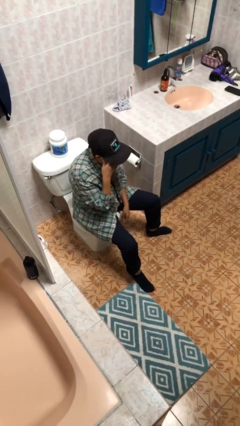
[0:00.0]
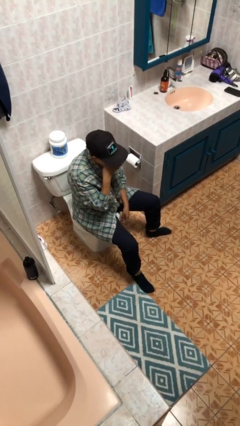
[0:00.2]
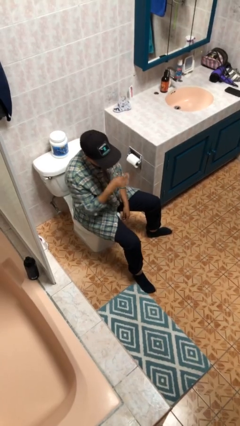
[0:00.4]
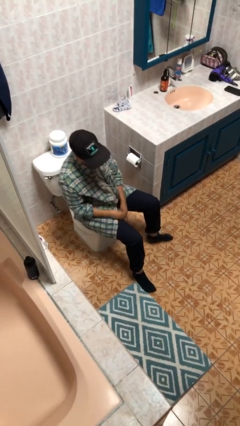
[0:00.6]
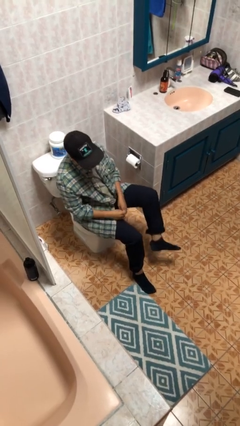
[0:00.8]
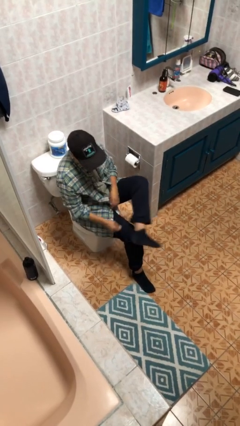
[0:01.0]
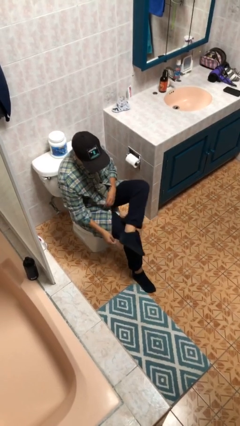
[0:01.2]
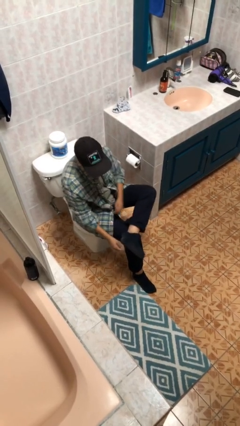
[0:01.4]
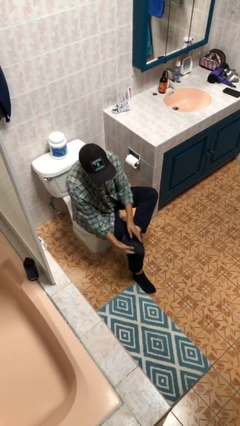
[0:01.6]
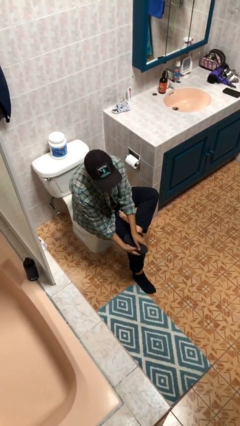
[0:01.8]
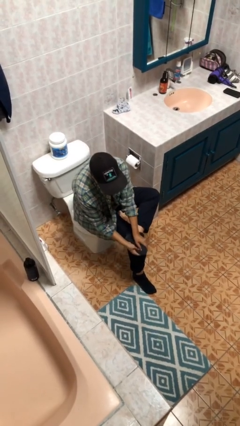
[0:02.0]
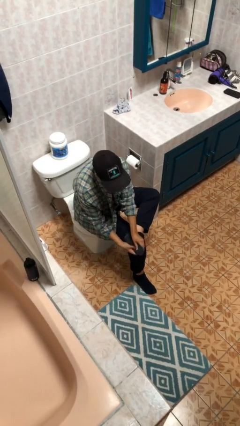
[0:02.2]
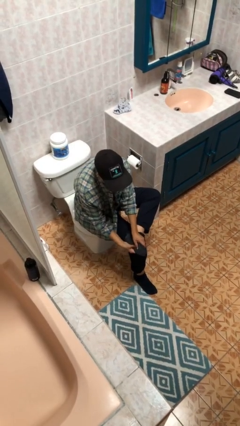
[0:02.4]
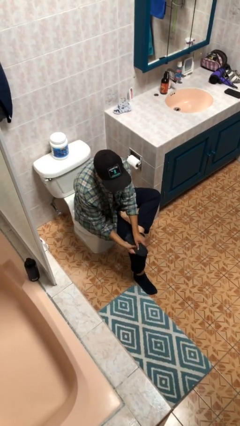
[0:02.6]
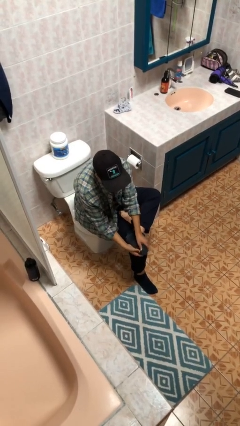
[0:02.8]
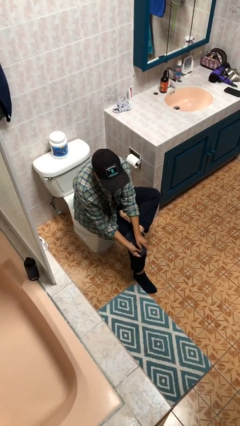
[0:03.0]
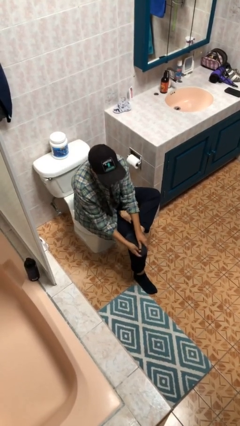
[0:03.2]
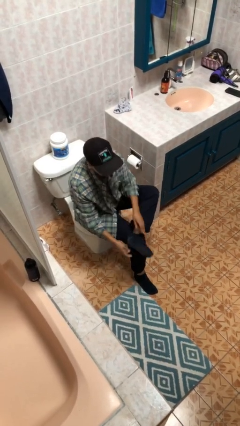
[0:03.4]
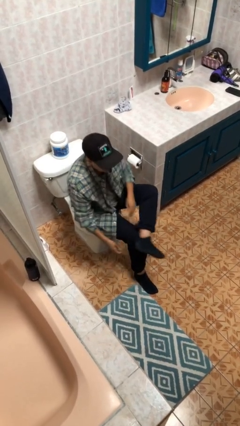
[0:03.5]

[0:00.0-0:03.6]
person rubs foot

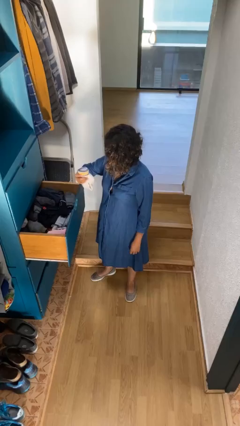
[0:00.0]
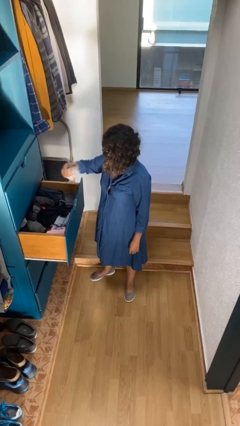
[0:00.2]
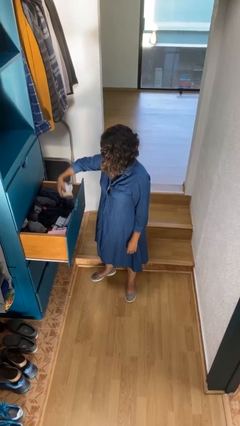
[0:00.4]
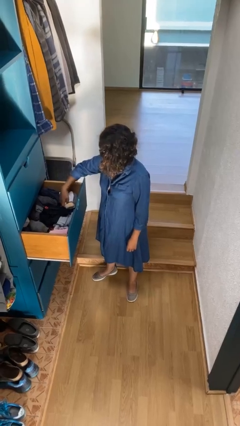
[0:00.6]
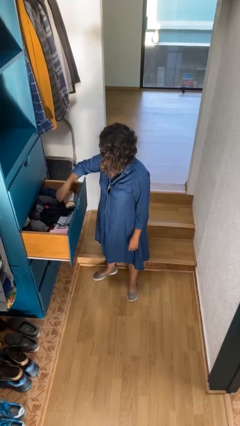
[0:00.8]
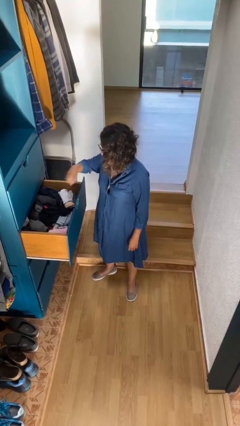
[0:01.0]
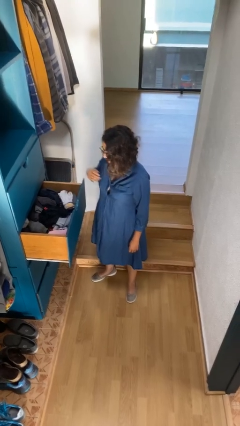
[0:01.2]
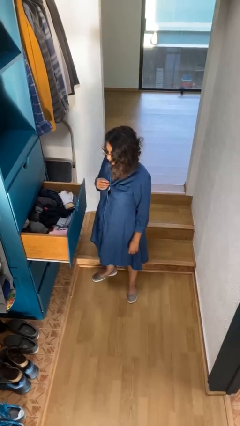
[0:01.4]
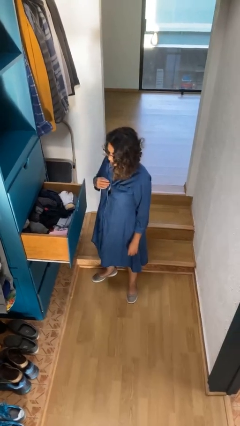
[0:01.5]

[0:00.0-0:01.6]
person puts clothes into dresser

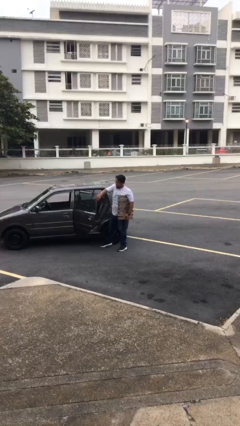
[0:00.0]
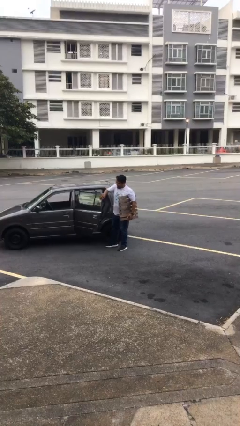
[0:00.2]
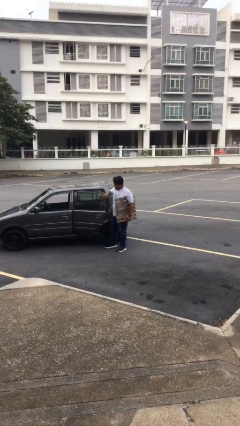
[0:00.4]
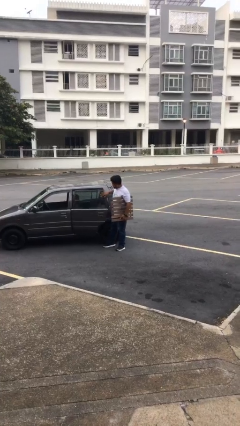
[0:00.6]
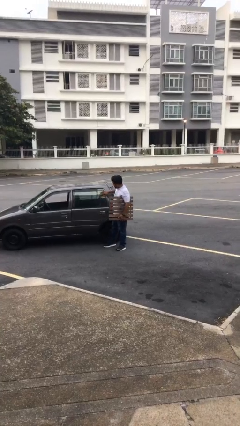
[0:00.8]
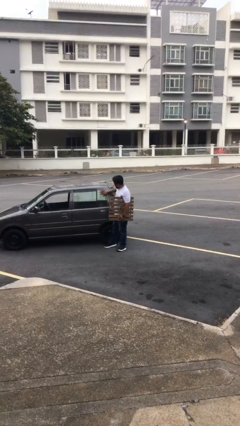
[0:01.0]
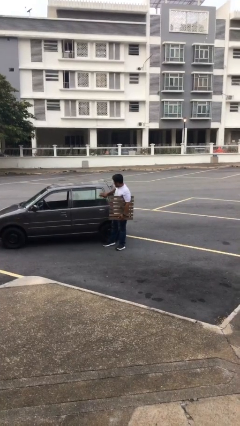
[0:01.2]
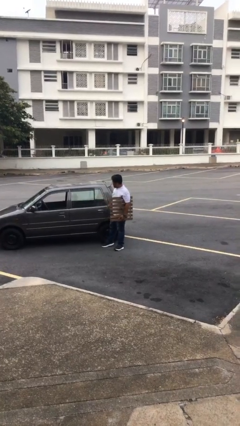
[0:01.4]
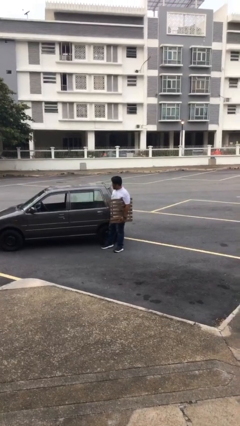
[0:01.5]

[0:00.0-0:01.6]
person closes car door

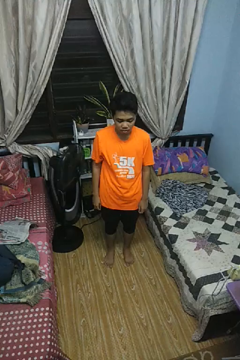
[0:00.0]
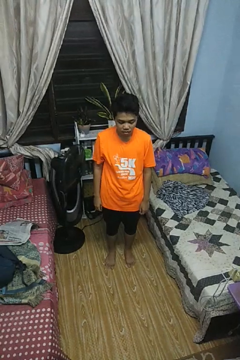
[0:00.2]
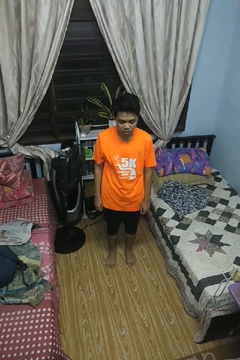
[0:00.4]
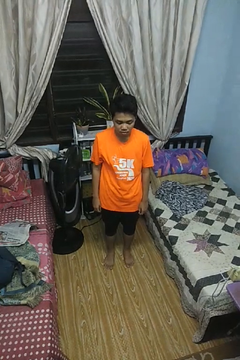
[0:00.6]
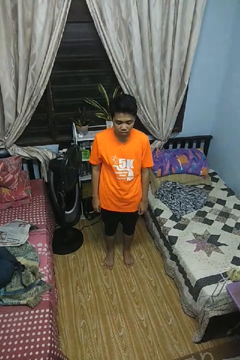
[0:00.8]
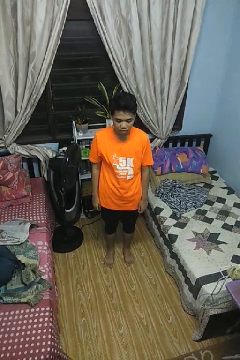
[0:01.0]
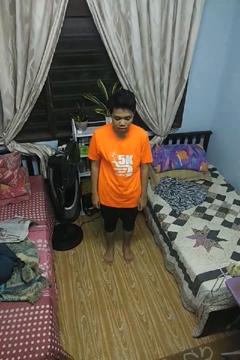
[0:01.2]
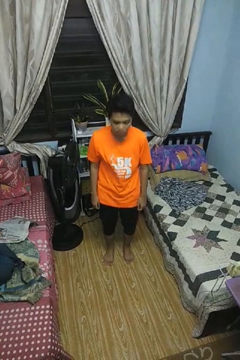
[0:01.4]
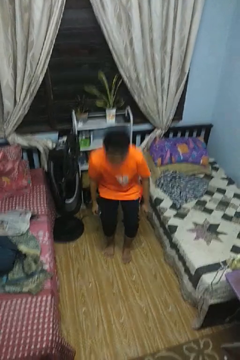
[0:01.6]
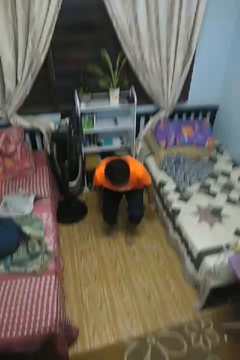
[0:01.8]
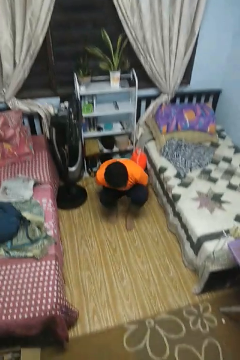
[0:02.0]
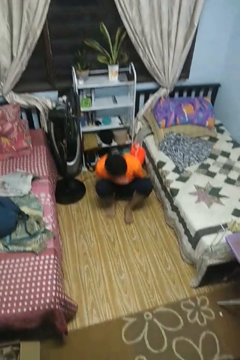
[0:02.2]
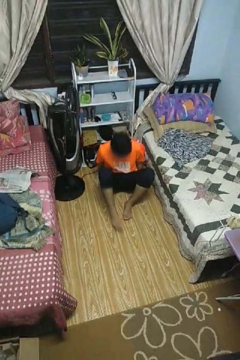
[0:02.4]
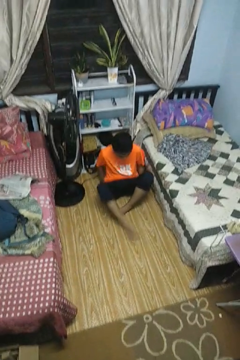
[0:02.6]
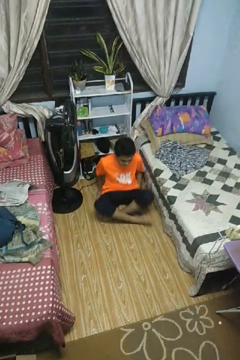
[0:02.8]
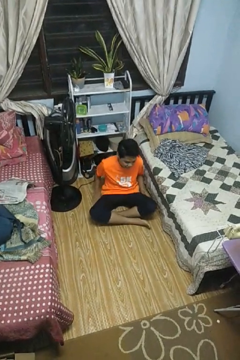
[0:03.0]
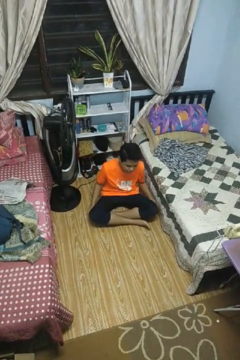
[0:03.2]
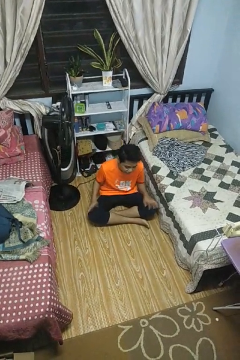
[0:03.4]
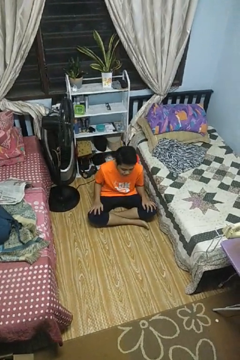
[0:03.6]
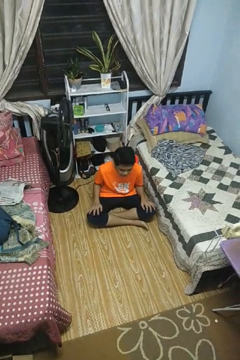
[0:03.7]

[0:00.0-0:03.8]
person sits crisscross

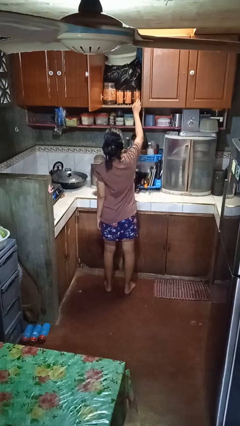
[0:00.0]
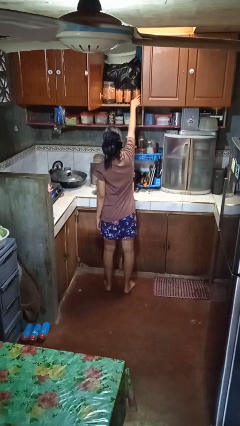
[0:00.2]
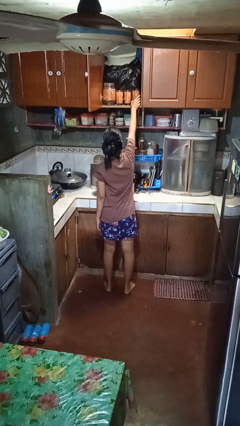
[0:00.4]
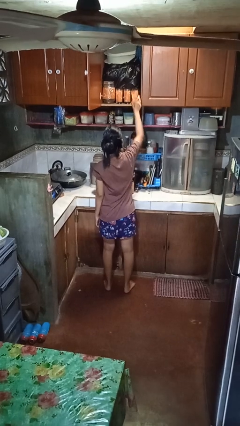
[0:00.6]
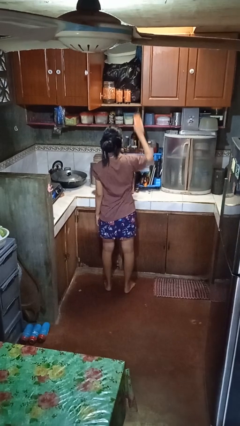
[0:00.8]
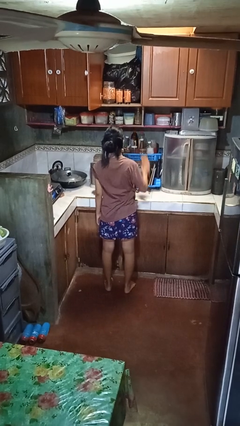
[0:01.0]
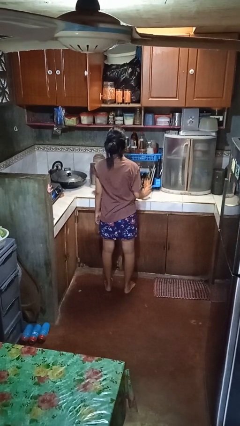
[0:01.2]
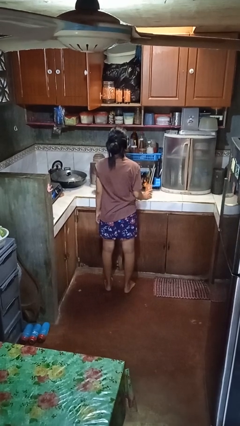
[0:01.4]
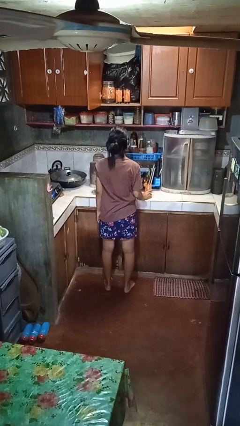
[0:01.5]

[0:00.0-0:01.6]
person takes object from cabinet

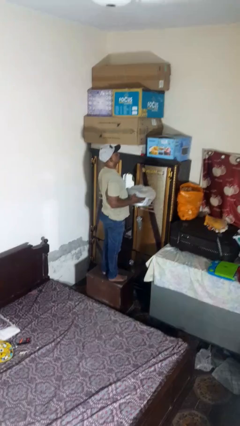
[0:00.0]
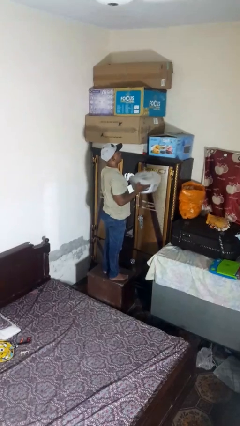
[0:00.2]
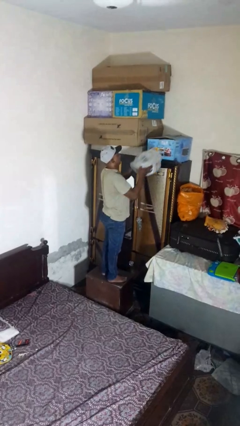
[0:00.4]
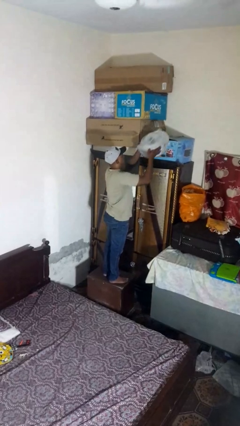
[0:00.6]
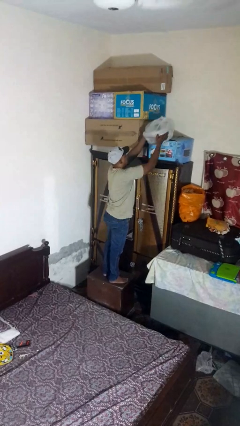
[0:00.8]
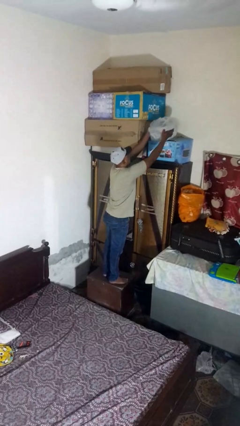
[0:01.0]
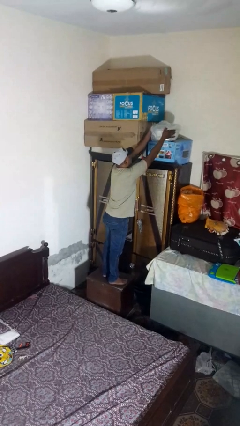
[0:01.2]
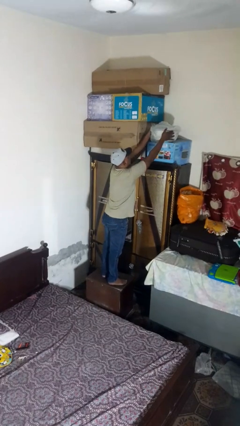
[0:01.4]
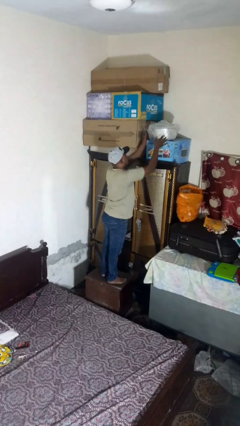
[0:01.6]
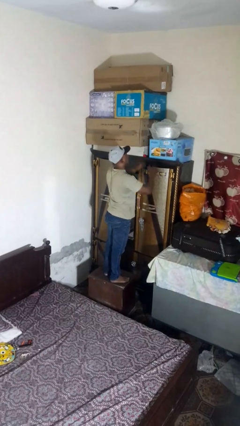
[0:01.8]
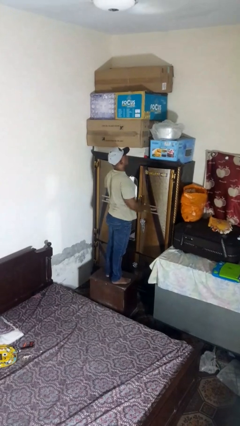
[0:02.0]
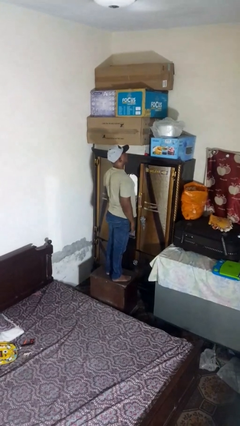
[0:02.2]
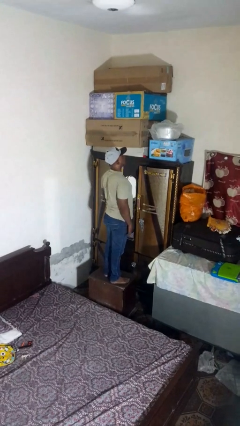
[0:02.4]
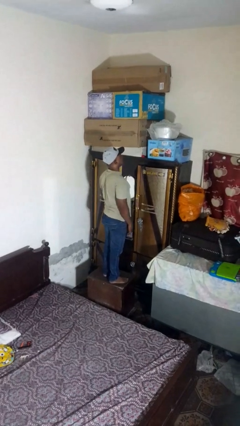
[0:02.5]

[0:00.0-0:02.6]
person picks up object from shelf

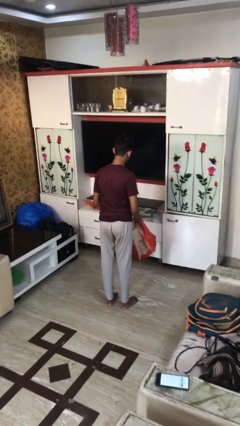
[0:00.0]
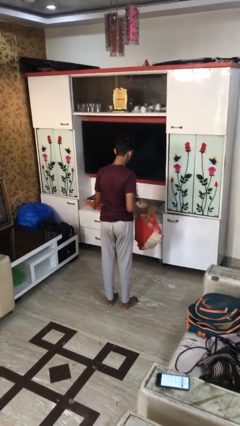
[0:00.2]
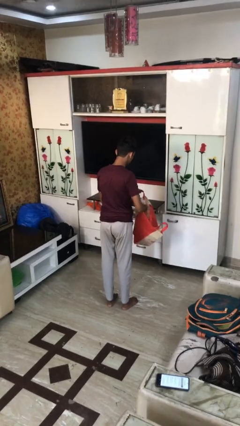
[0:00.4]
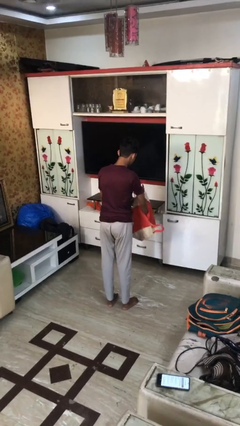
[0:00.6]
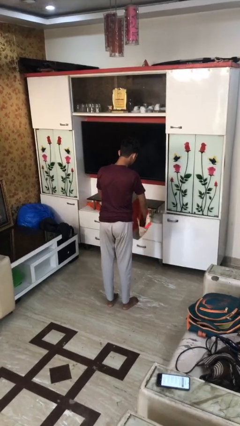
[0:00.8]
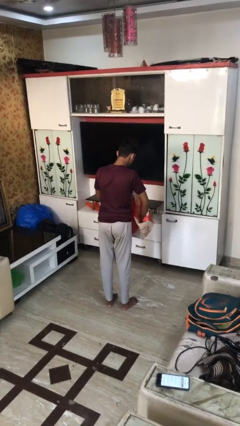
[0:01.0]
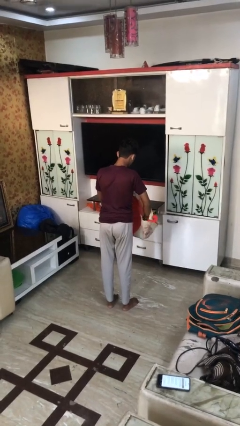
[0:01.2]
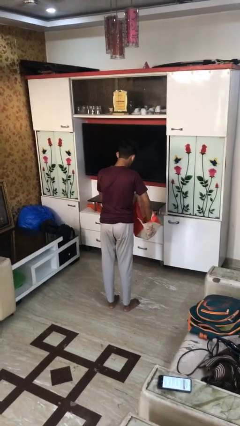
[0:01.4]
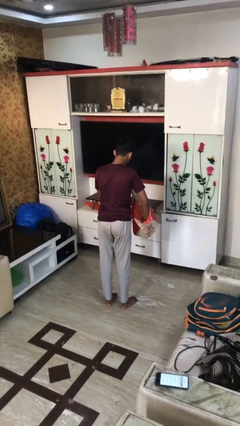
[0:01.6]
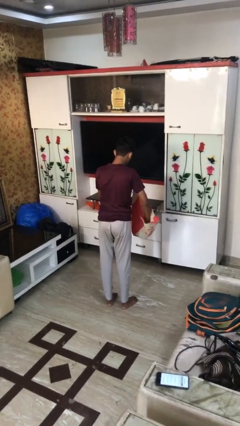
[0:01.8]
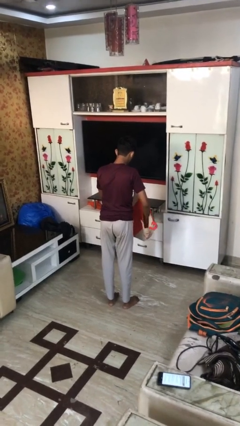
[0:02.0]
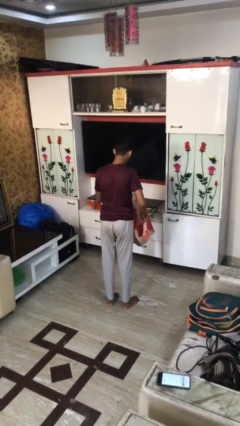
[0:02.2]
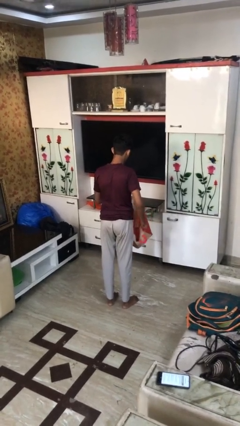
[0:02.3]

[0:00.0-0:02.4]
person searches in bag

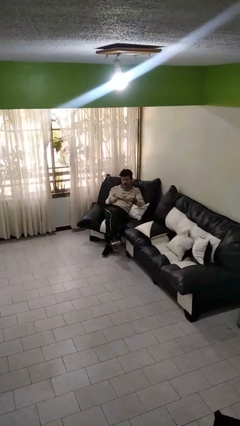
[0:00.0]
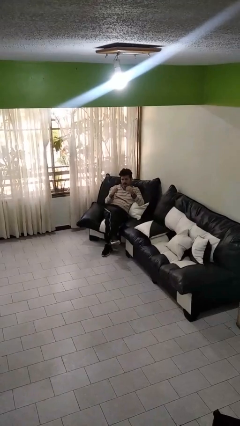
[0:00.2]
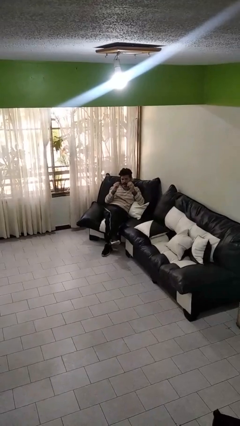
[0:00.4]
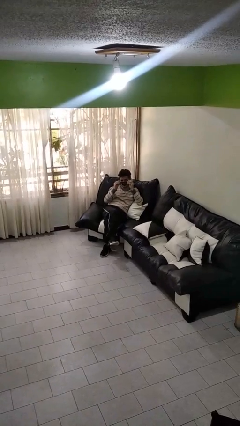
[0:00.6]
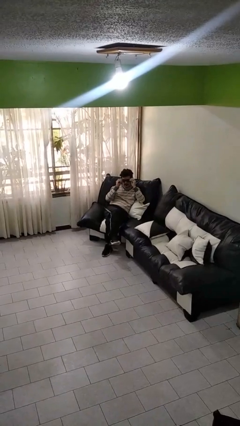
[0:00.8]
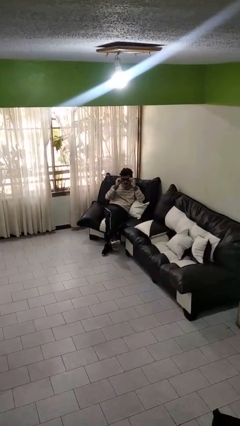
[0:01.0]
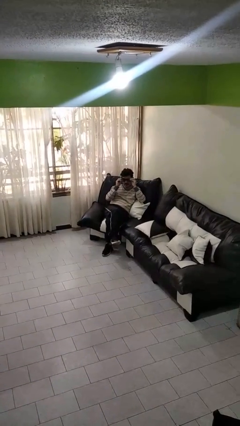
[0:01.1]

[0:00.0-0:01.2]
person puts on sunglasses
